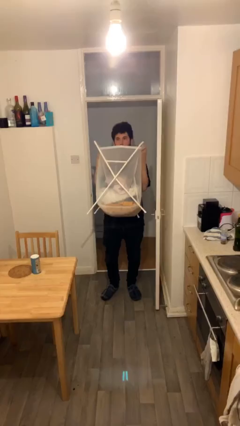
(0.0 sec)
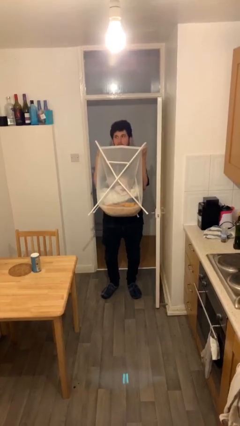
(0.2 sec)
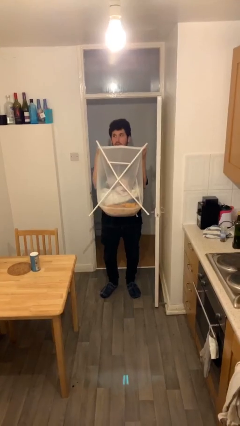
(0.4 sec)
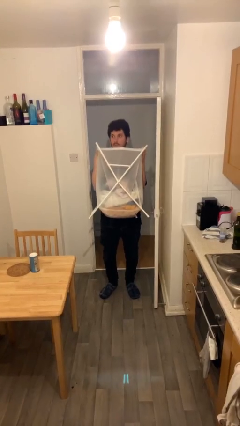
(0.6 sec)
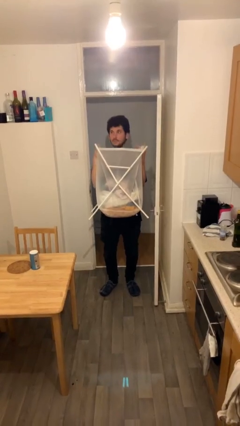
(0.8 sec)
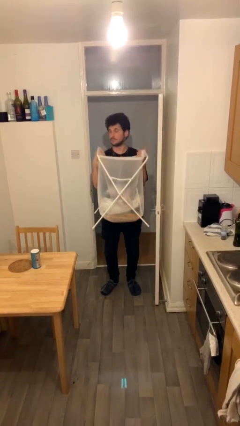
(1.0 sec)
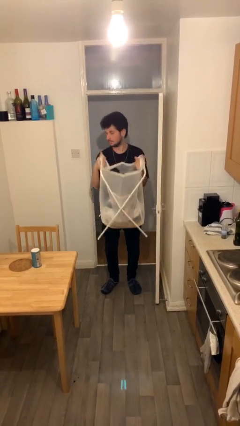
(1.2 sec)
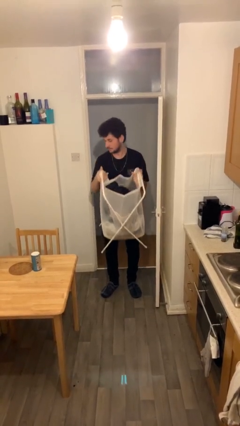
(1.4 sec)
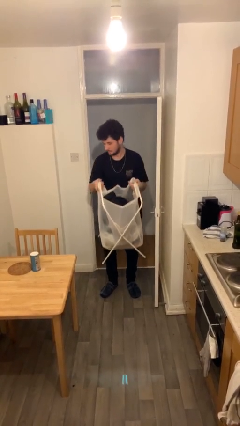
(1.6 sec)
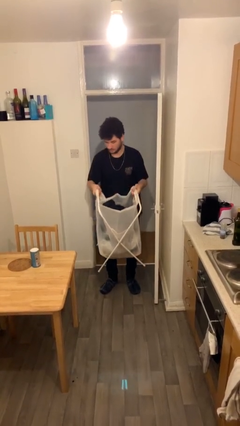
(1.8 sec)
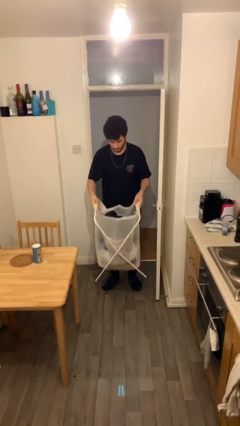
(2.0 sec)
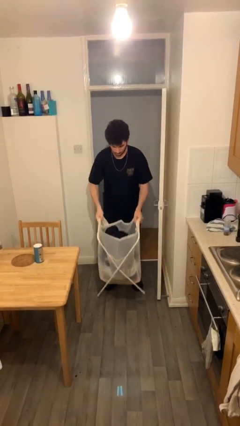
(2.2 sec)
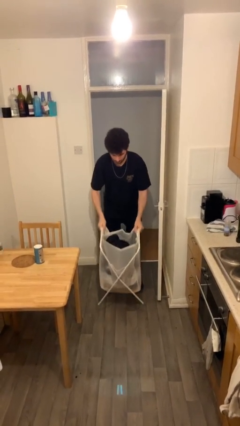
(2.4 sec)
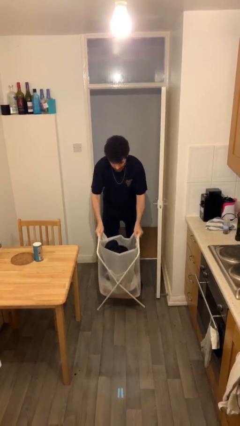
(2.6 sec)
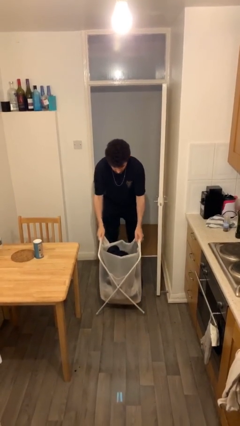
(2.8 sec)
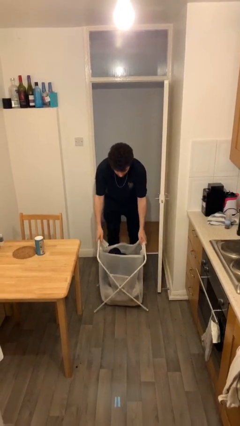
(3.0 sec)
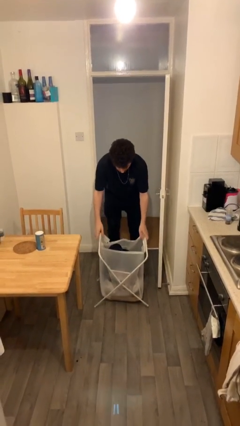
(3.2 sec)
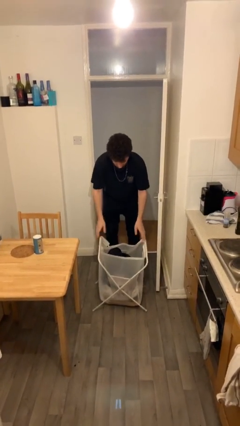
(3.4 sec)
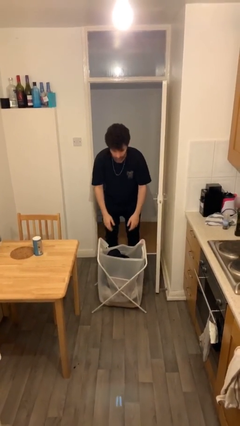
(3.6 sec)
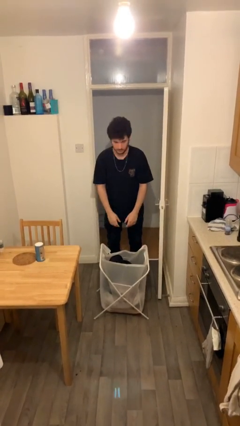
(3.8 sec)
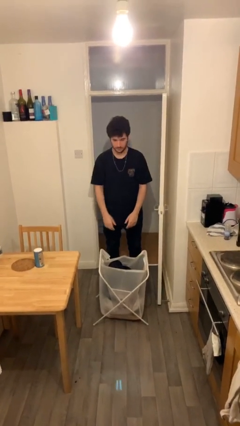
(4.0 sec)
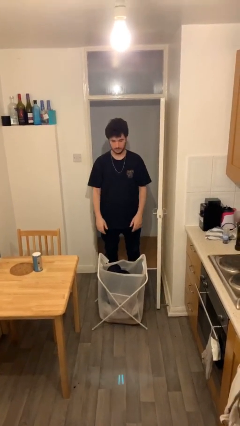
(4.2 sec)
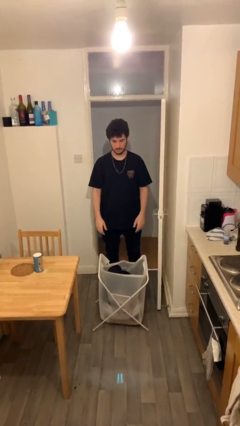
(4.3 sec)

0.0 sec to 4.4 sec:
person puts down object on floor

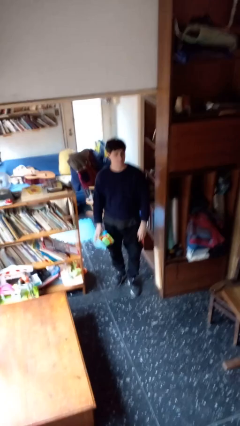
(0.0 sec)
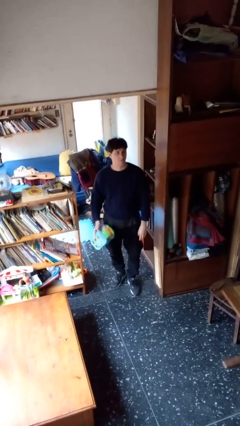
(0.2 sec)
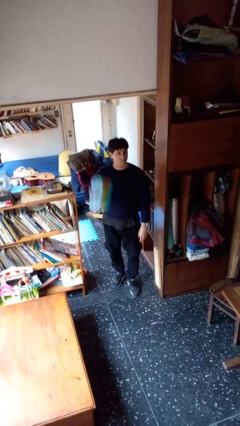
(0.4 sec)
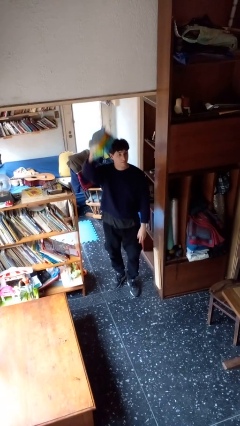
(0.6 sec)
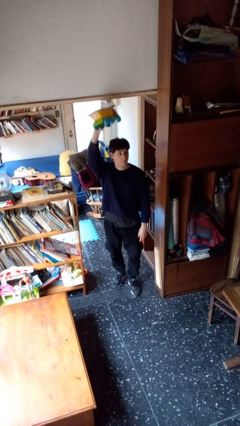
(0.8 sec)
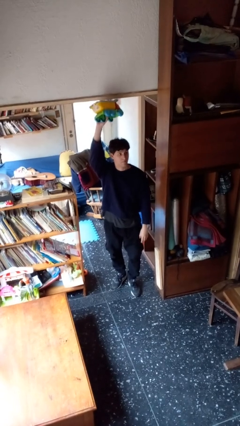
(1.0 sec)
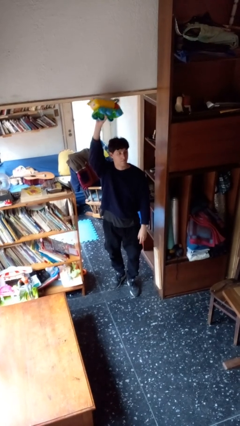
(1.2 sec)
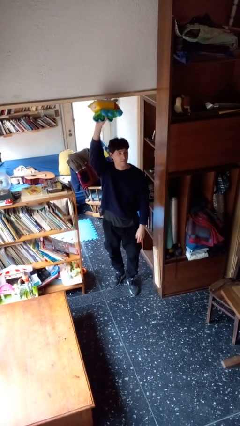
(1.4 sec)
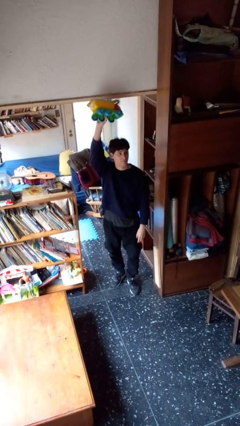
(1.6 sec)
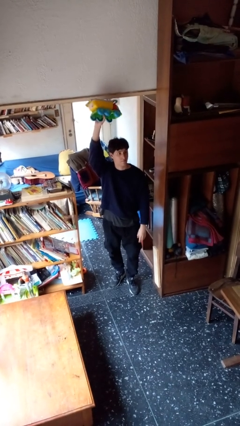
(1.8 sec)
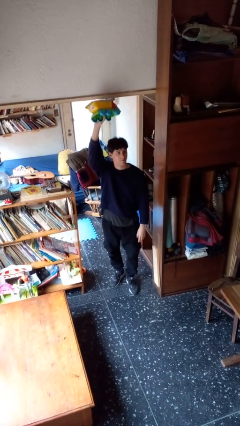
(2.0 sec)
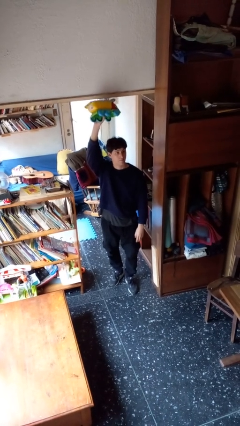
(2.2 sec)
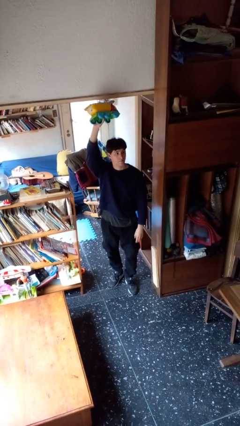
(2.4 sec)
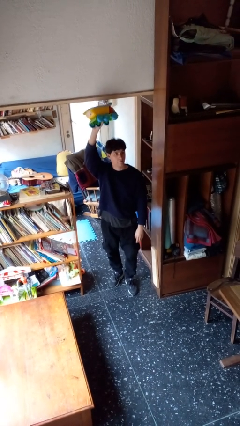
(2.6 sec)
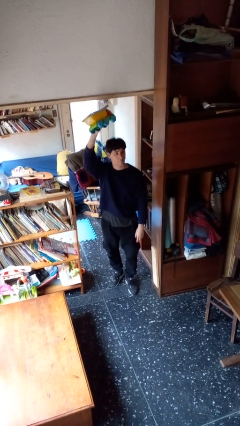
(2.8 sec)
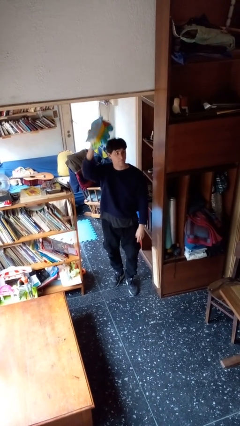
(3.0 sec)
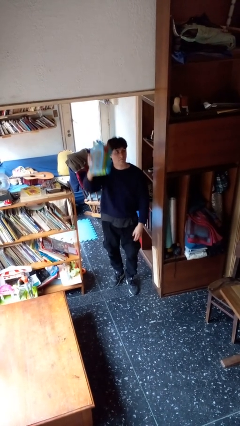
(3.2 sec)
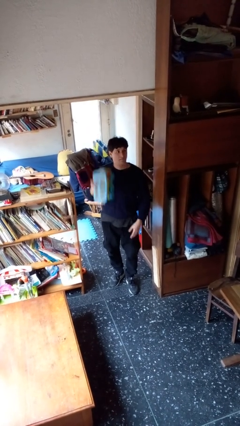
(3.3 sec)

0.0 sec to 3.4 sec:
person holds object above head

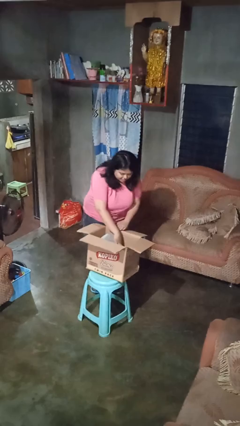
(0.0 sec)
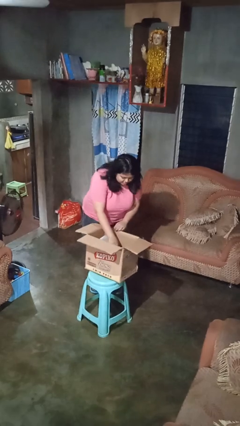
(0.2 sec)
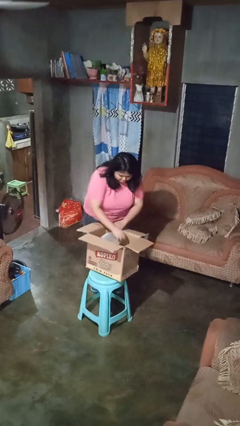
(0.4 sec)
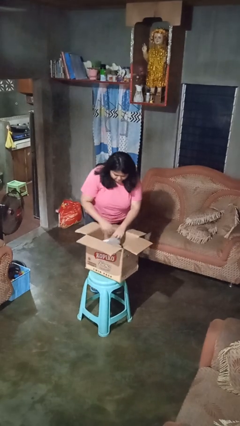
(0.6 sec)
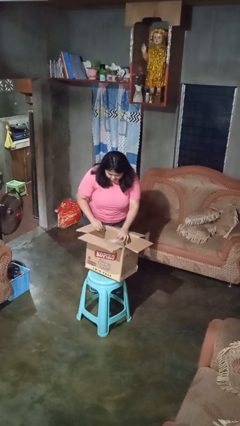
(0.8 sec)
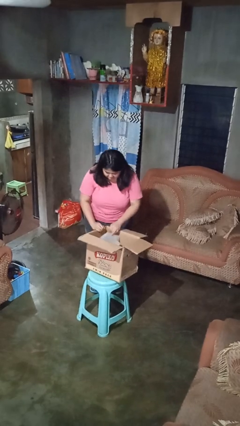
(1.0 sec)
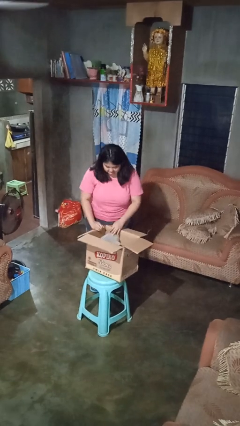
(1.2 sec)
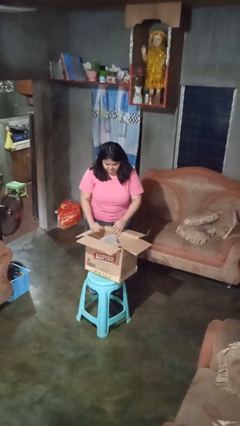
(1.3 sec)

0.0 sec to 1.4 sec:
person searches in box

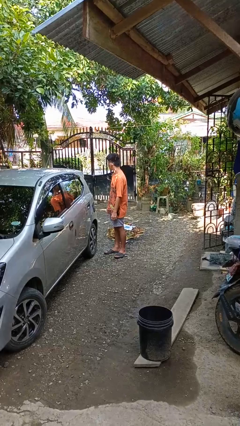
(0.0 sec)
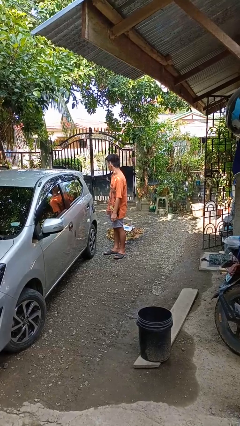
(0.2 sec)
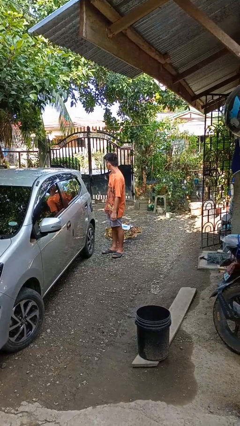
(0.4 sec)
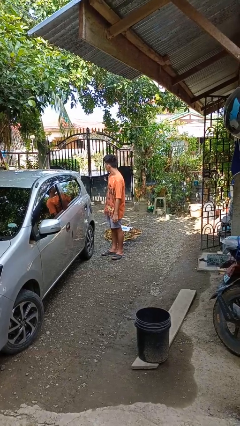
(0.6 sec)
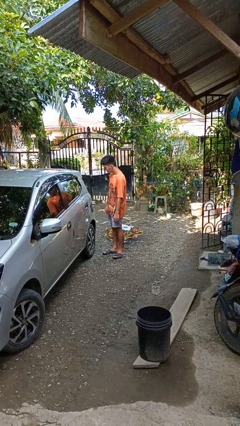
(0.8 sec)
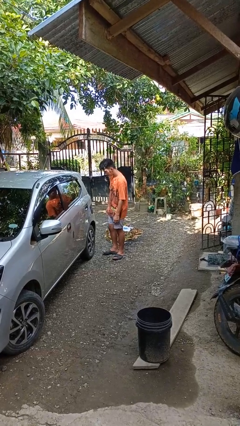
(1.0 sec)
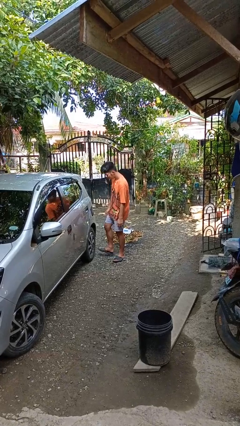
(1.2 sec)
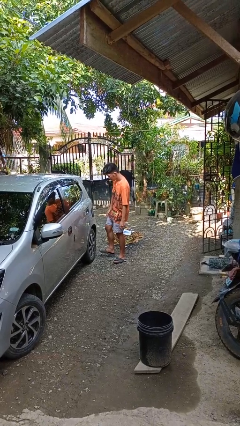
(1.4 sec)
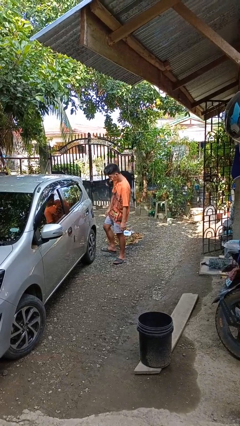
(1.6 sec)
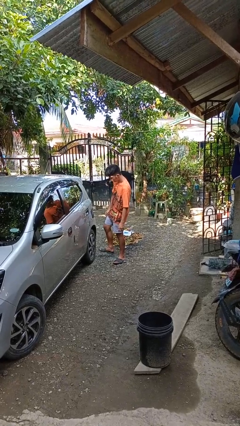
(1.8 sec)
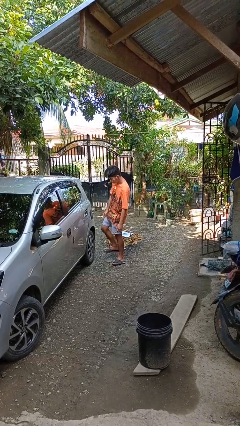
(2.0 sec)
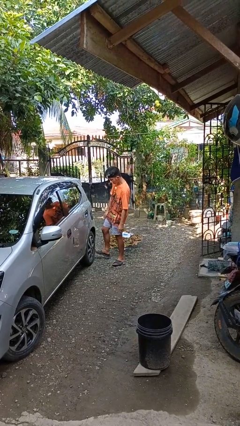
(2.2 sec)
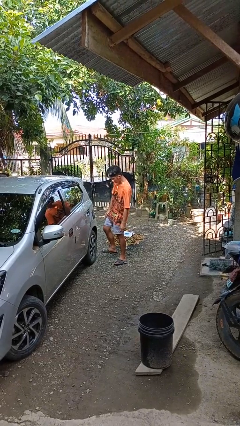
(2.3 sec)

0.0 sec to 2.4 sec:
person kicks car tires

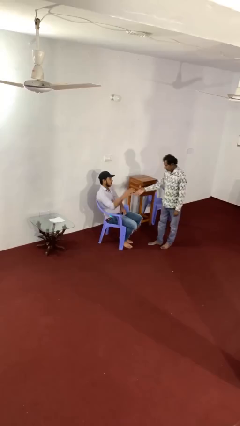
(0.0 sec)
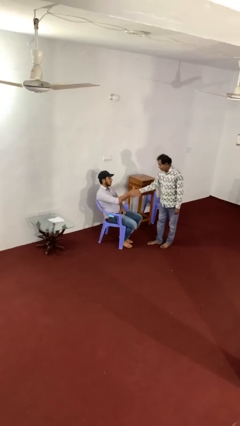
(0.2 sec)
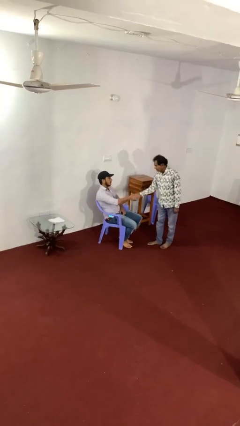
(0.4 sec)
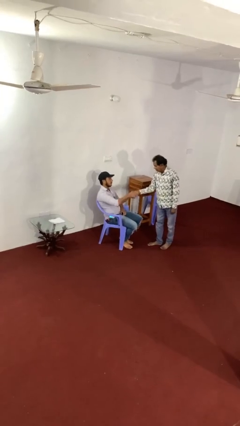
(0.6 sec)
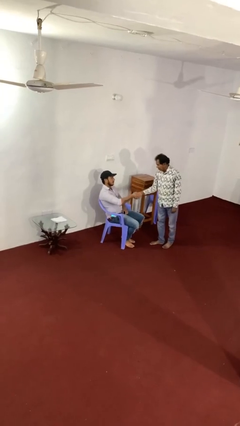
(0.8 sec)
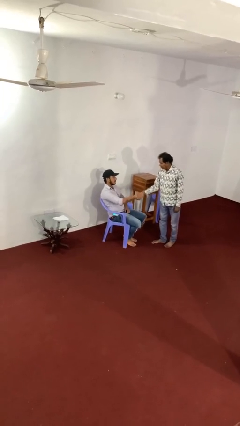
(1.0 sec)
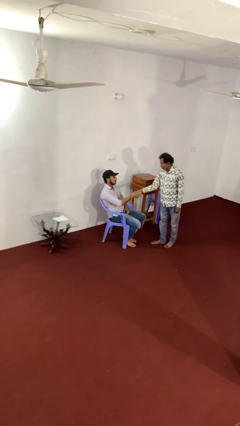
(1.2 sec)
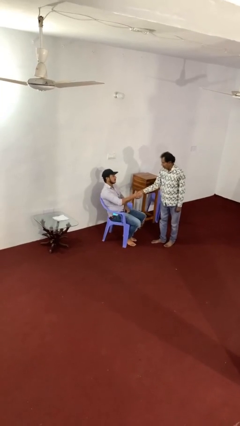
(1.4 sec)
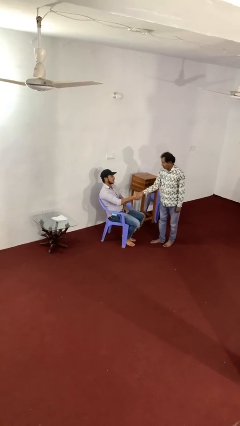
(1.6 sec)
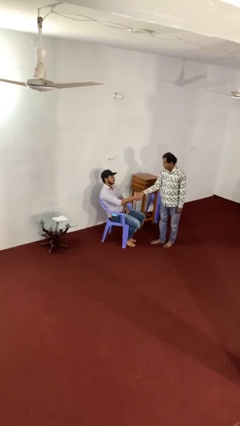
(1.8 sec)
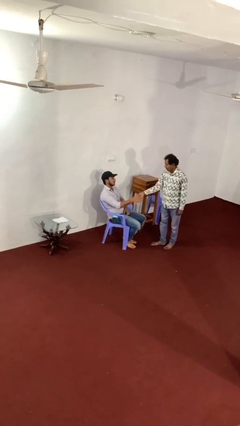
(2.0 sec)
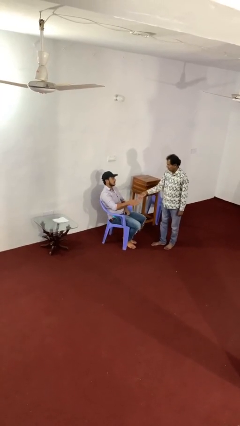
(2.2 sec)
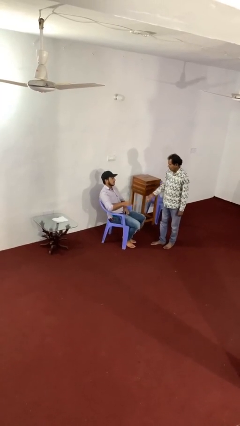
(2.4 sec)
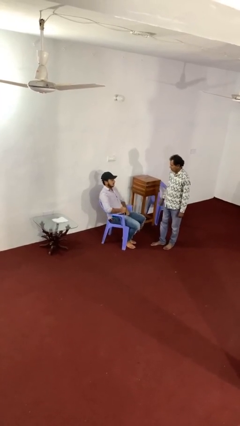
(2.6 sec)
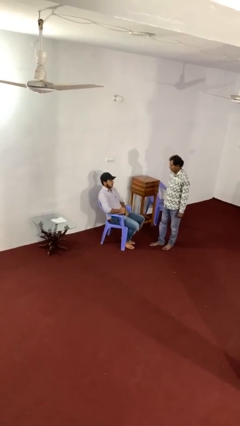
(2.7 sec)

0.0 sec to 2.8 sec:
person shakes hand

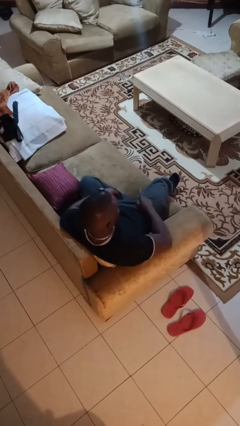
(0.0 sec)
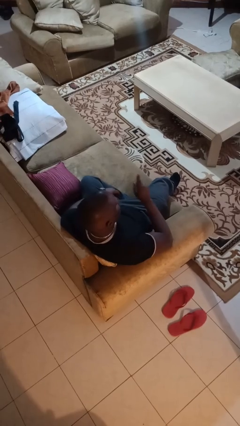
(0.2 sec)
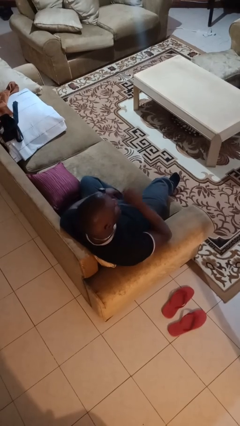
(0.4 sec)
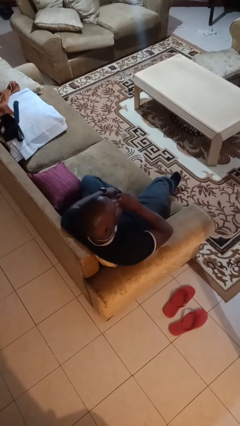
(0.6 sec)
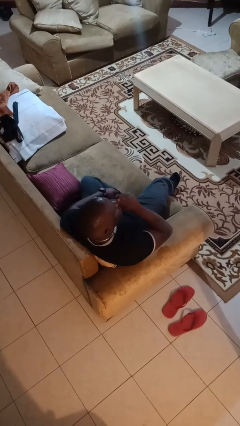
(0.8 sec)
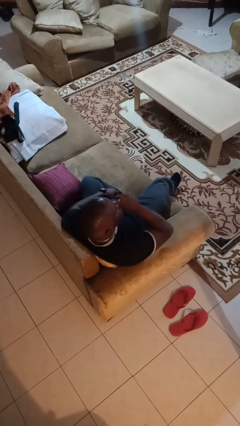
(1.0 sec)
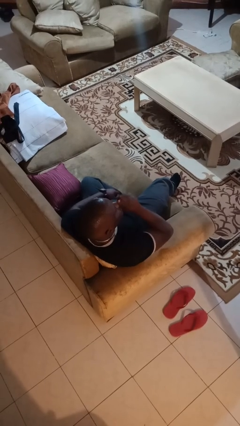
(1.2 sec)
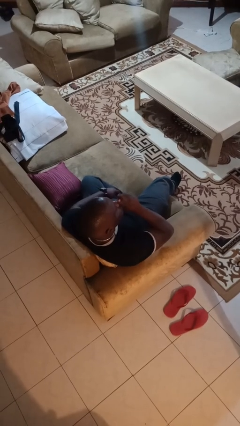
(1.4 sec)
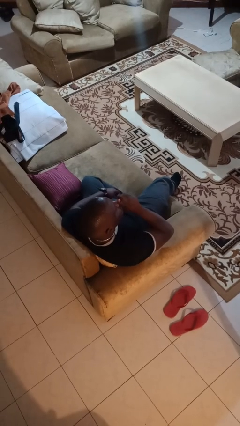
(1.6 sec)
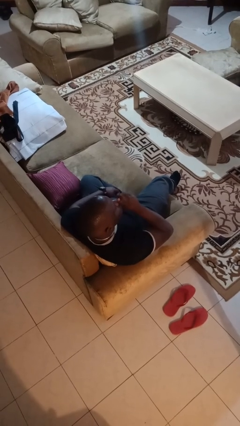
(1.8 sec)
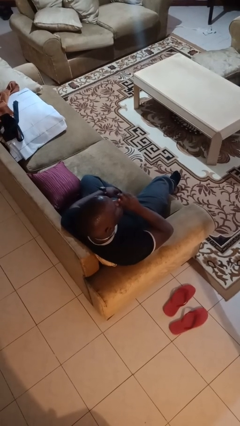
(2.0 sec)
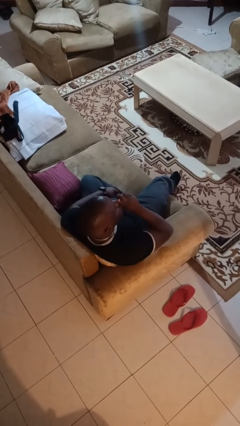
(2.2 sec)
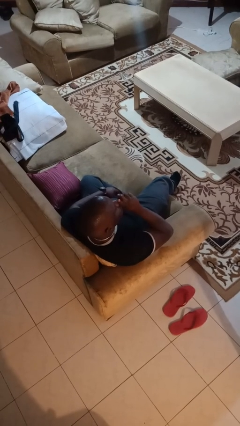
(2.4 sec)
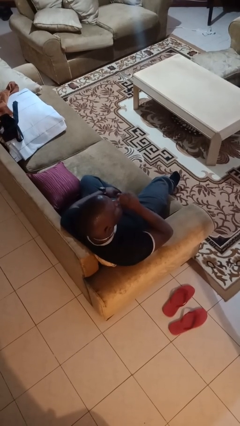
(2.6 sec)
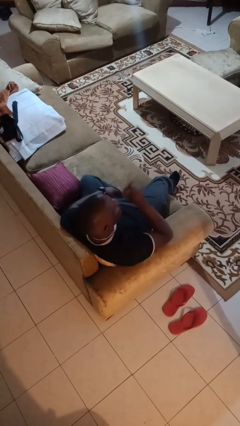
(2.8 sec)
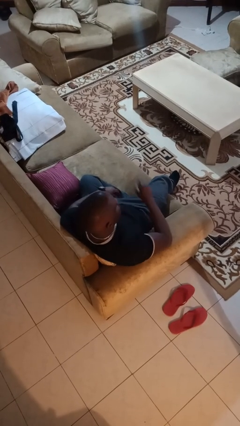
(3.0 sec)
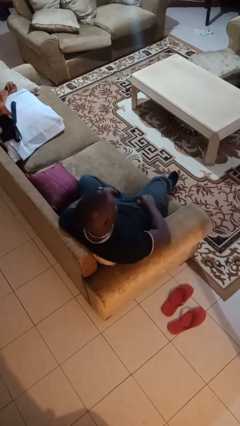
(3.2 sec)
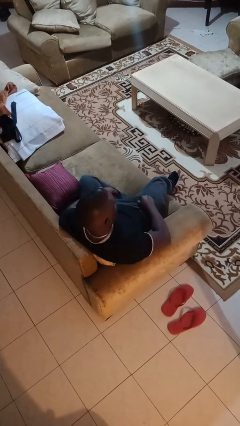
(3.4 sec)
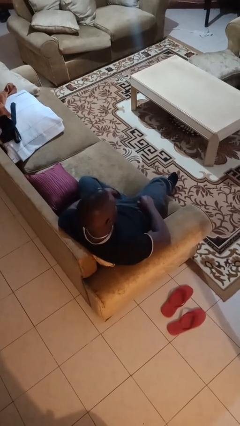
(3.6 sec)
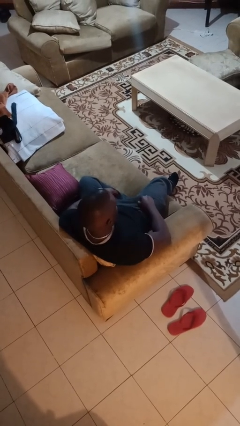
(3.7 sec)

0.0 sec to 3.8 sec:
person gestures be quiet
